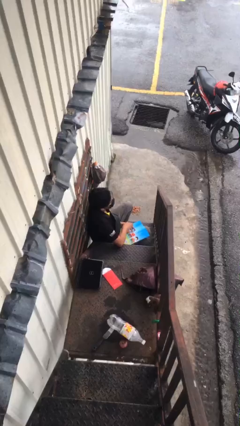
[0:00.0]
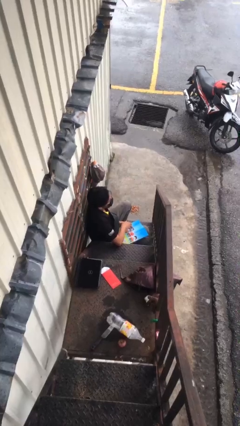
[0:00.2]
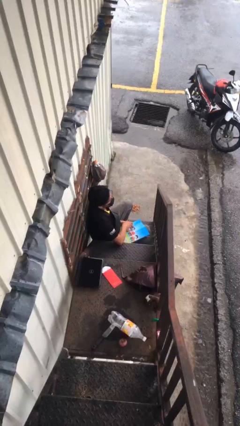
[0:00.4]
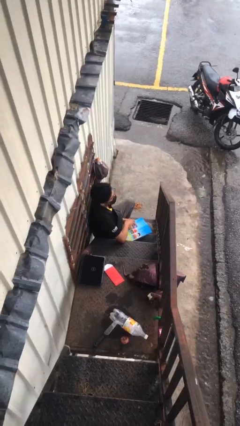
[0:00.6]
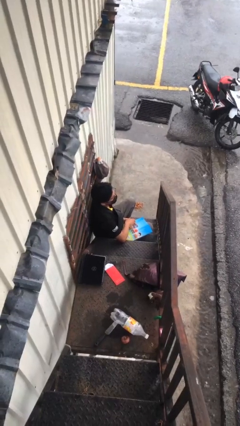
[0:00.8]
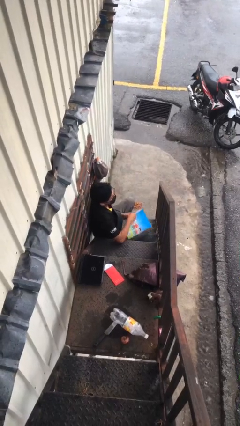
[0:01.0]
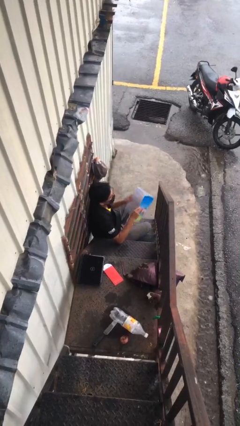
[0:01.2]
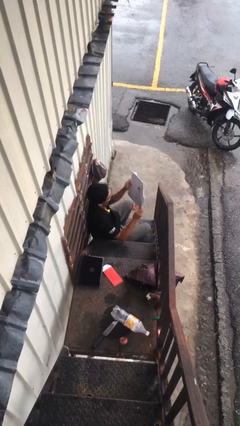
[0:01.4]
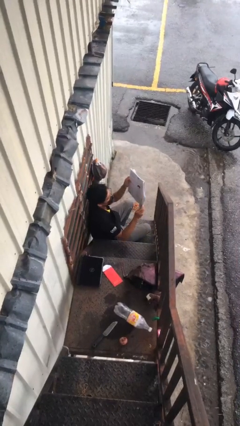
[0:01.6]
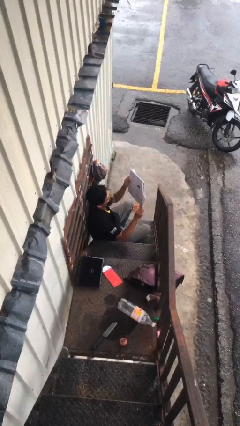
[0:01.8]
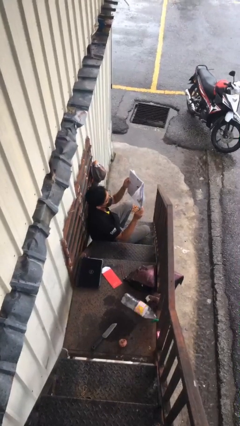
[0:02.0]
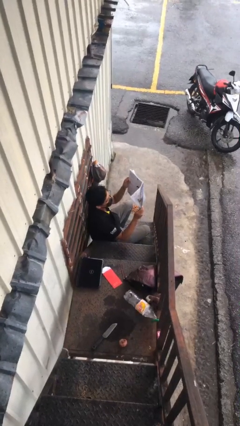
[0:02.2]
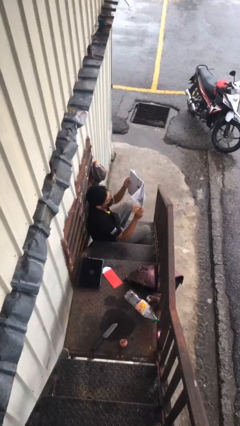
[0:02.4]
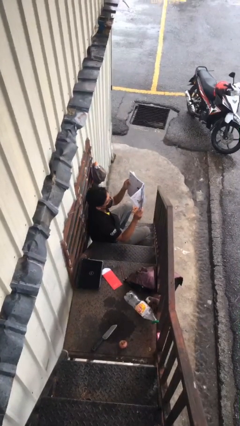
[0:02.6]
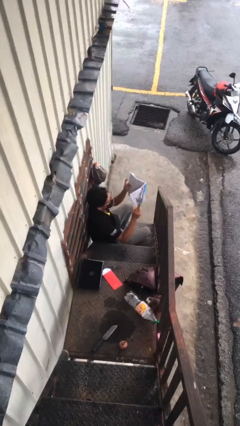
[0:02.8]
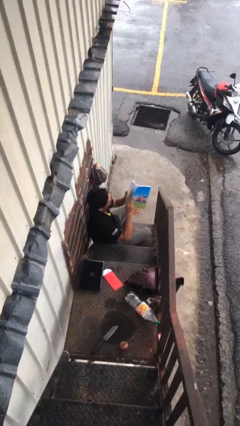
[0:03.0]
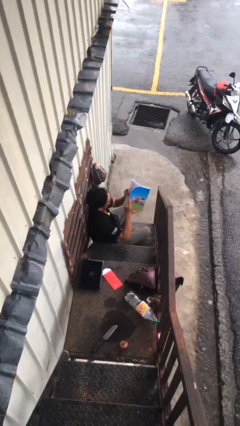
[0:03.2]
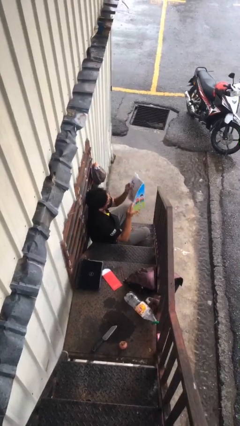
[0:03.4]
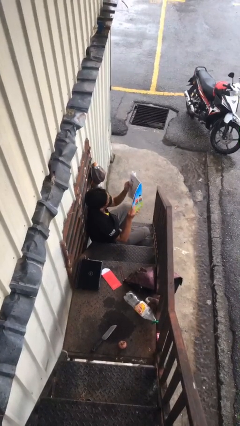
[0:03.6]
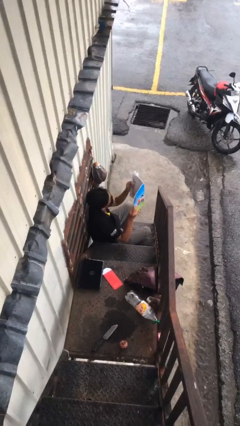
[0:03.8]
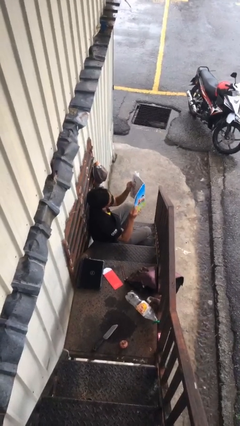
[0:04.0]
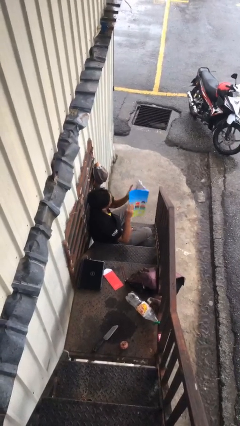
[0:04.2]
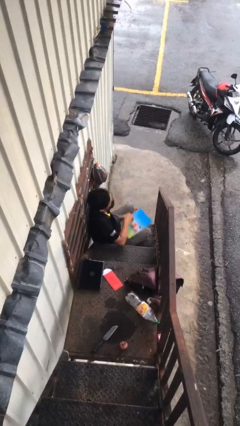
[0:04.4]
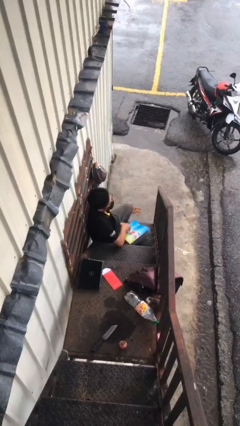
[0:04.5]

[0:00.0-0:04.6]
person reads document

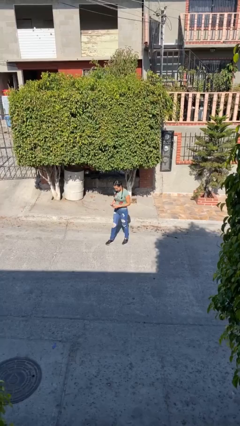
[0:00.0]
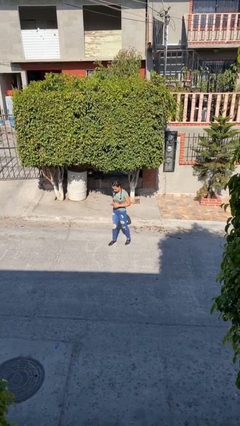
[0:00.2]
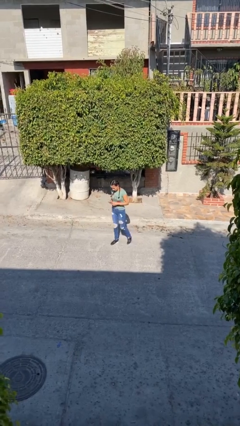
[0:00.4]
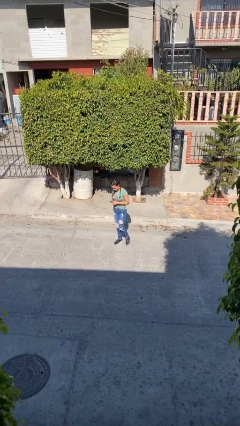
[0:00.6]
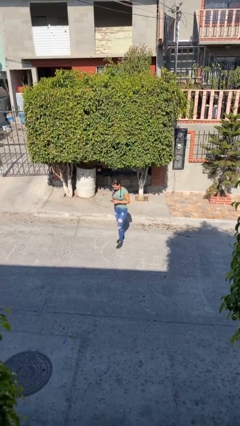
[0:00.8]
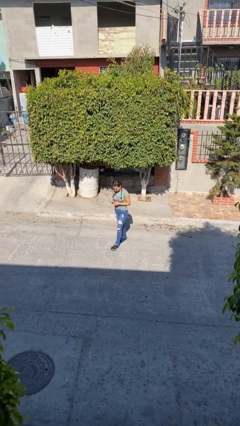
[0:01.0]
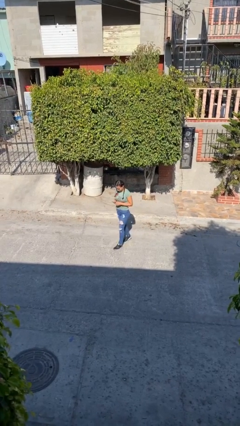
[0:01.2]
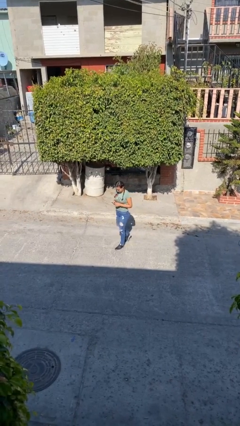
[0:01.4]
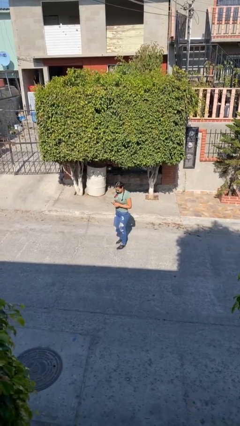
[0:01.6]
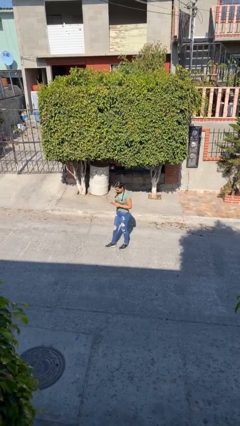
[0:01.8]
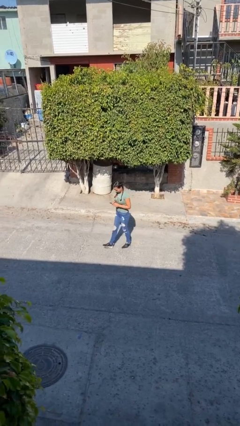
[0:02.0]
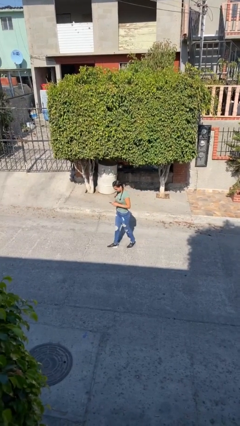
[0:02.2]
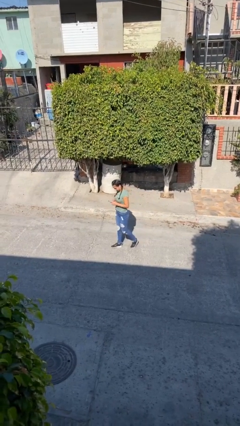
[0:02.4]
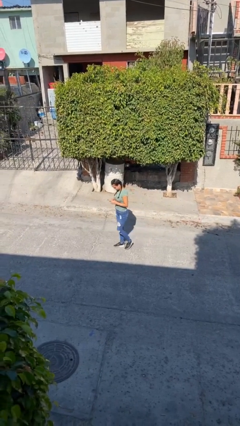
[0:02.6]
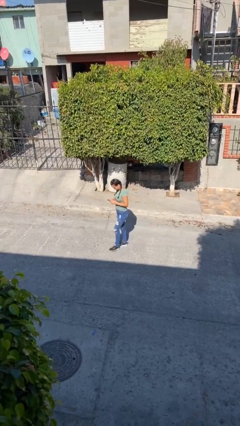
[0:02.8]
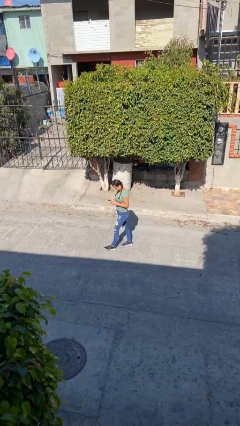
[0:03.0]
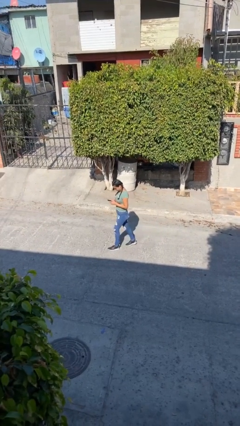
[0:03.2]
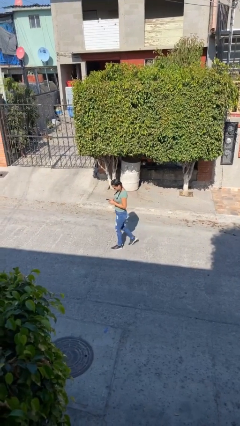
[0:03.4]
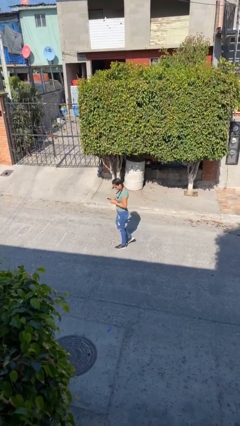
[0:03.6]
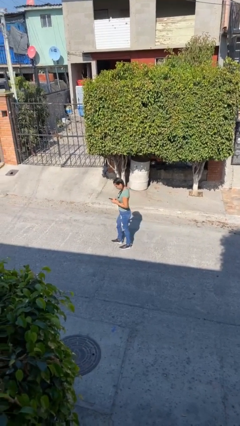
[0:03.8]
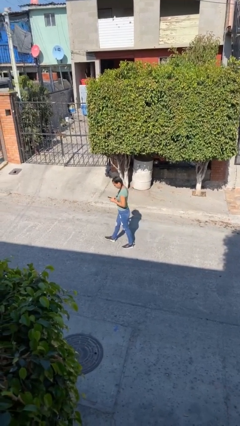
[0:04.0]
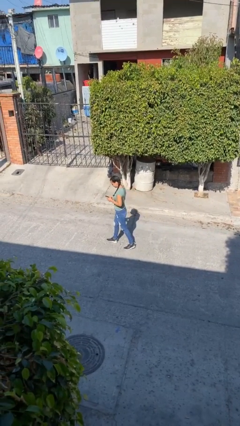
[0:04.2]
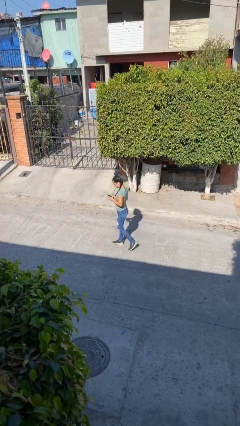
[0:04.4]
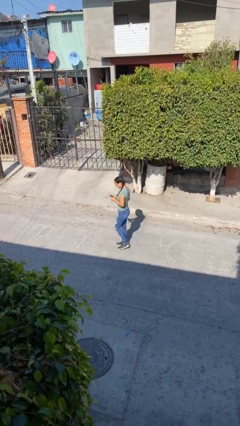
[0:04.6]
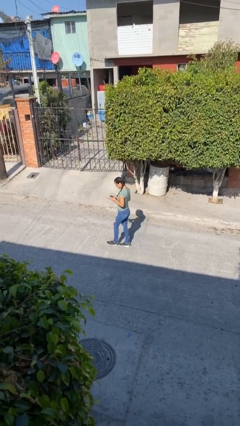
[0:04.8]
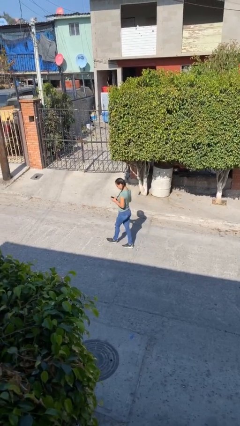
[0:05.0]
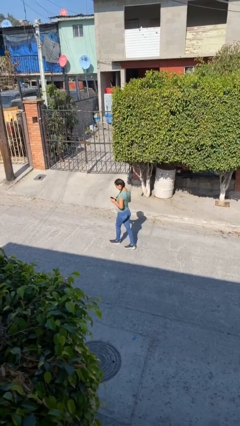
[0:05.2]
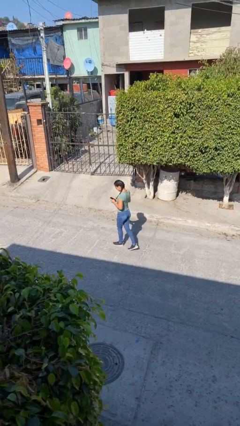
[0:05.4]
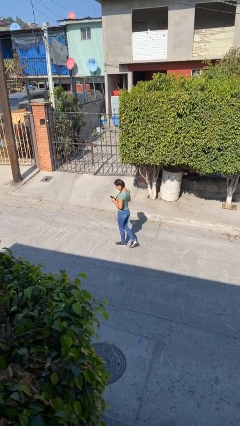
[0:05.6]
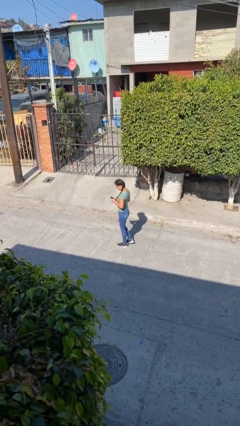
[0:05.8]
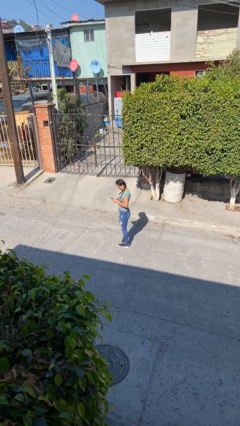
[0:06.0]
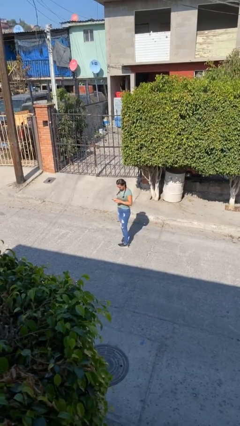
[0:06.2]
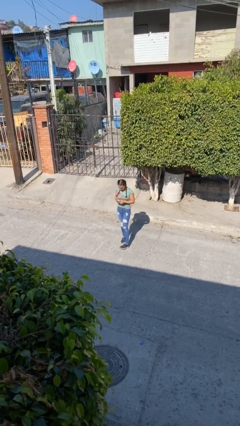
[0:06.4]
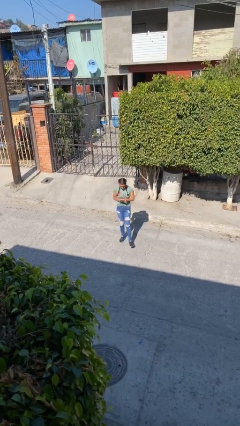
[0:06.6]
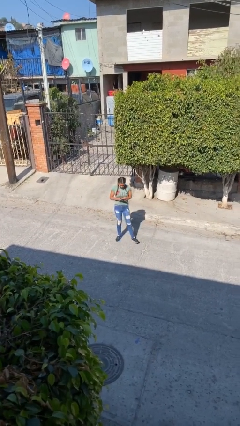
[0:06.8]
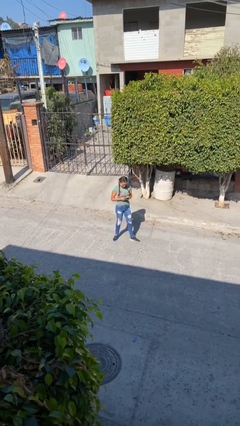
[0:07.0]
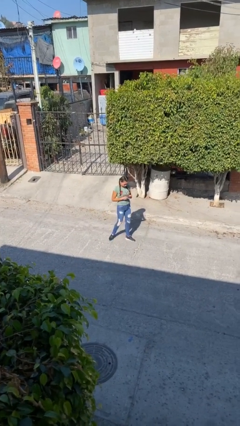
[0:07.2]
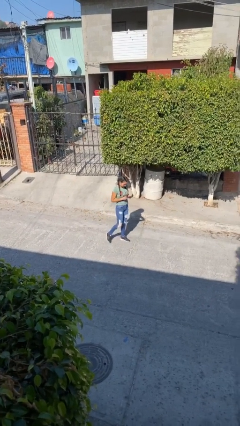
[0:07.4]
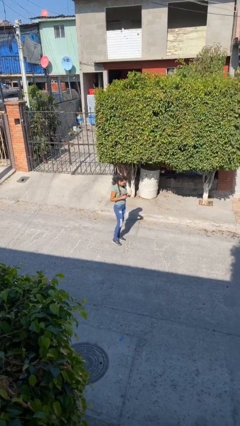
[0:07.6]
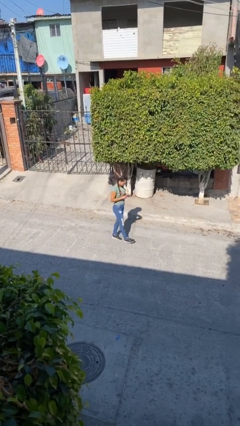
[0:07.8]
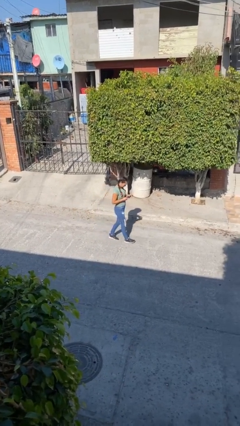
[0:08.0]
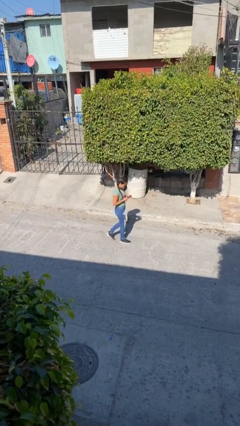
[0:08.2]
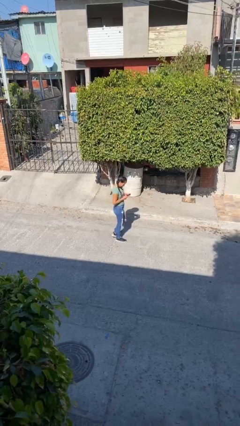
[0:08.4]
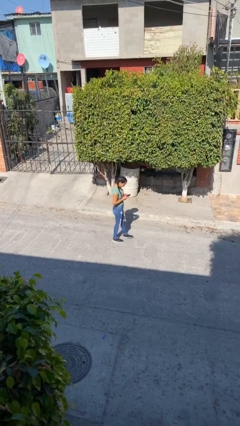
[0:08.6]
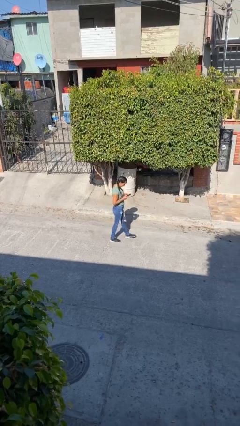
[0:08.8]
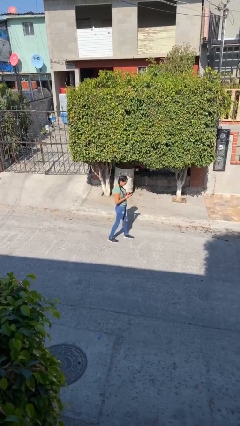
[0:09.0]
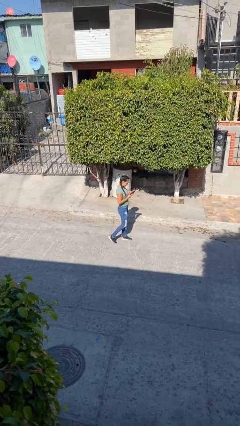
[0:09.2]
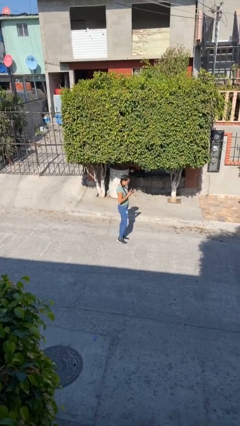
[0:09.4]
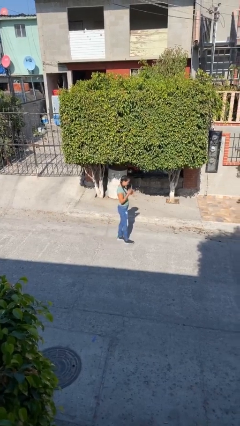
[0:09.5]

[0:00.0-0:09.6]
person texts on phone

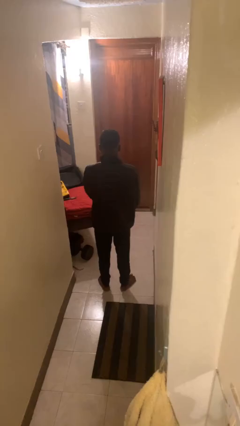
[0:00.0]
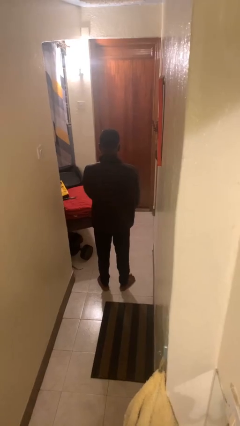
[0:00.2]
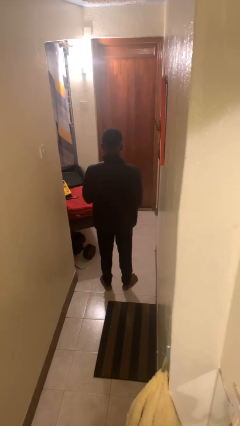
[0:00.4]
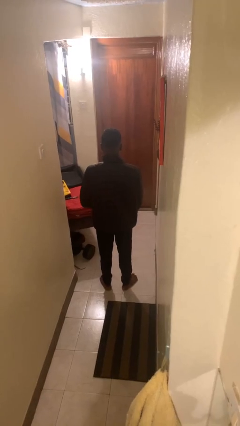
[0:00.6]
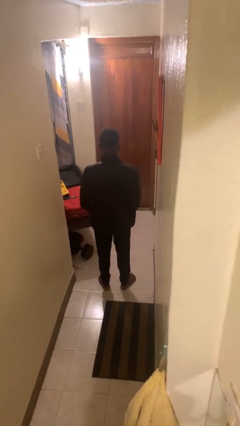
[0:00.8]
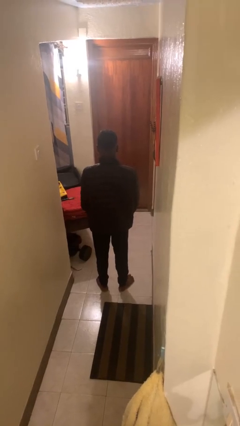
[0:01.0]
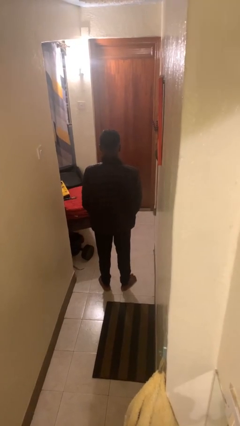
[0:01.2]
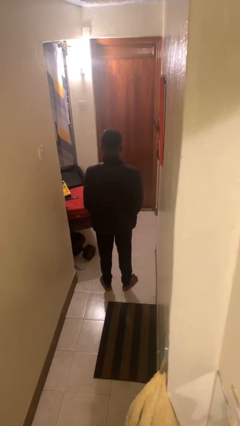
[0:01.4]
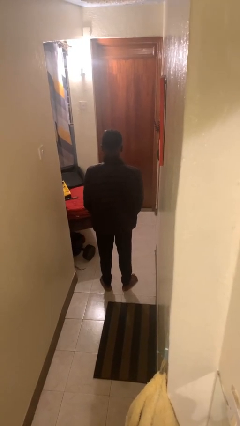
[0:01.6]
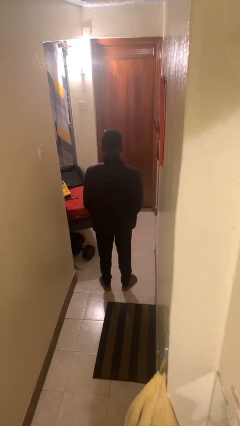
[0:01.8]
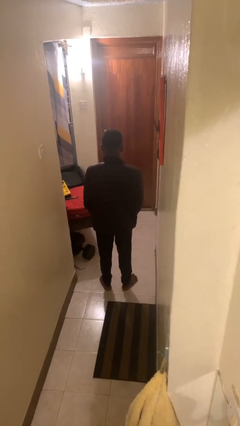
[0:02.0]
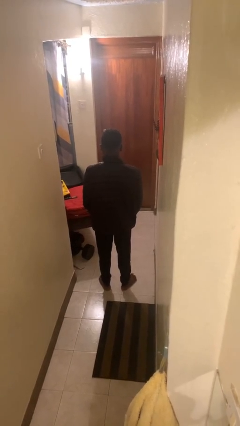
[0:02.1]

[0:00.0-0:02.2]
person unzips jacket

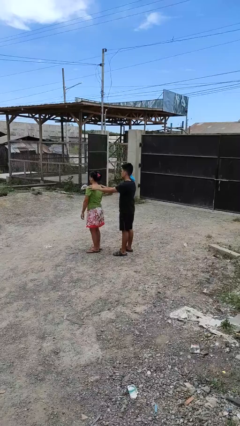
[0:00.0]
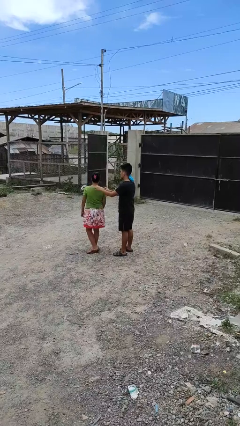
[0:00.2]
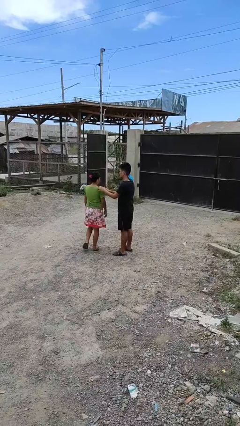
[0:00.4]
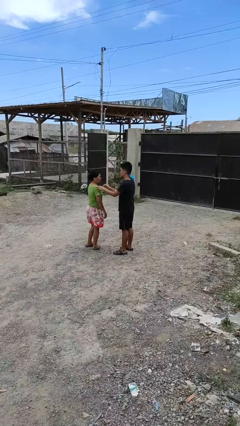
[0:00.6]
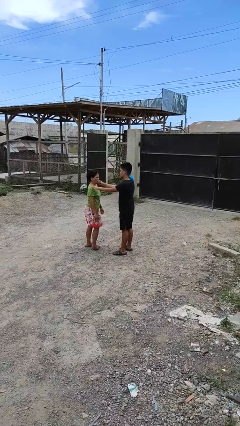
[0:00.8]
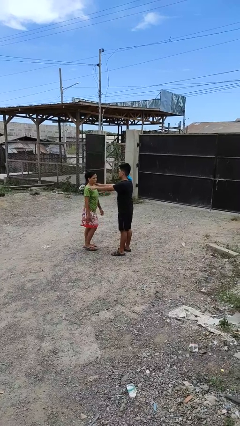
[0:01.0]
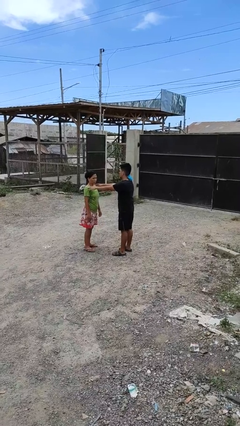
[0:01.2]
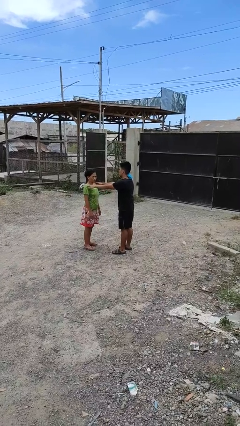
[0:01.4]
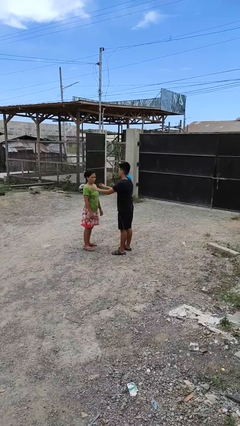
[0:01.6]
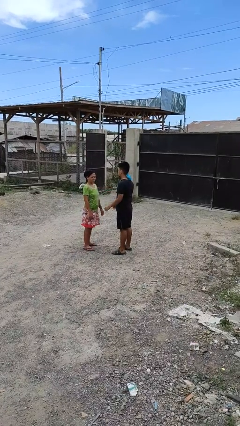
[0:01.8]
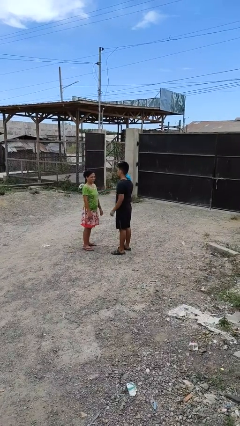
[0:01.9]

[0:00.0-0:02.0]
person spins person around
